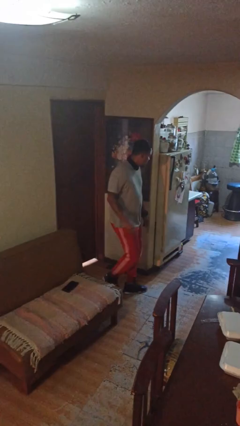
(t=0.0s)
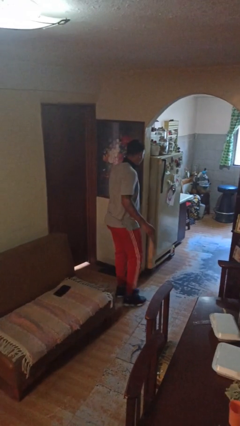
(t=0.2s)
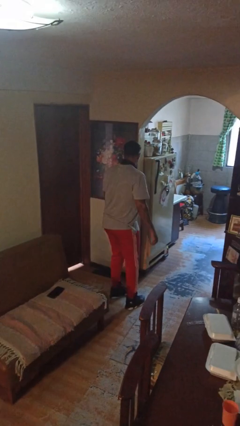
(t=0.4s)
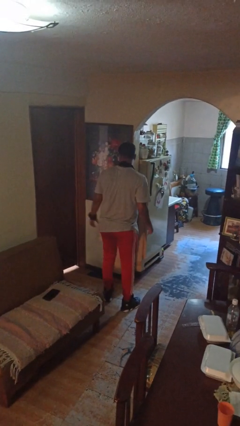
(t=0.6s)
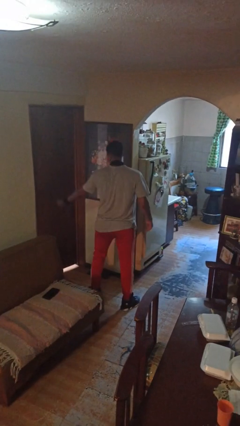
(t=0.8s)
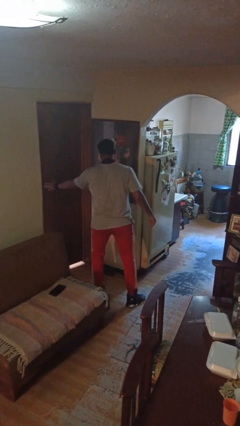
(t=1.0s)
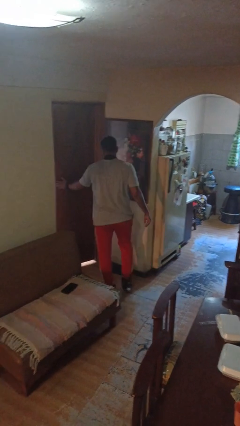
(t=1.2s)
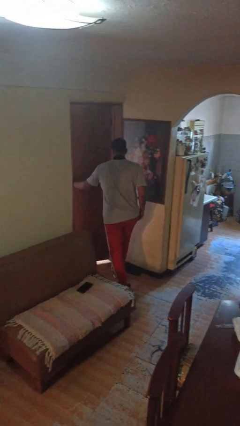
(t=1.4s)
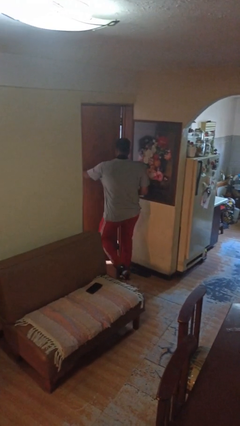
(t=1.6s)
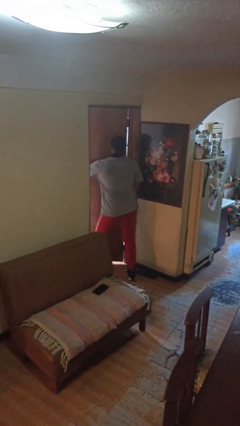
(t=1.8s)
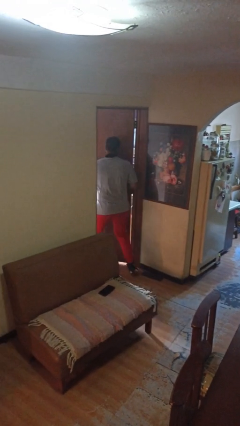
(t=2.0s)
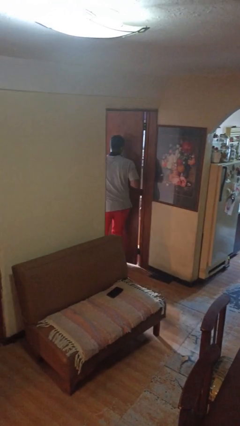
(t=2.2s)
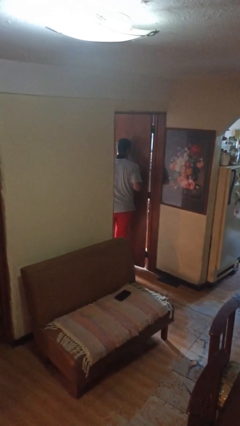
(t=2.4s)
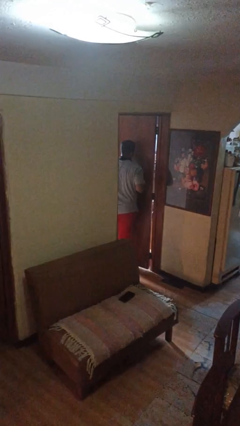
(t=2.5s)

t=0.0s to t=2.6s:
person opens facility door

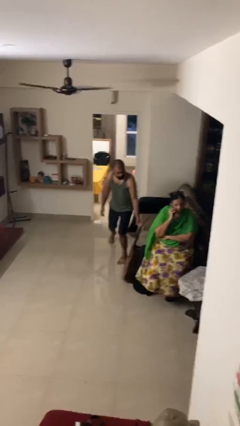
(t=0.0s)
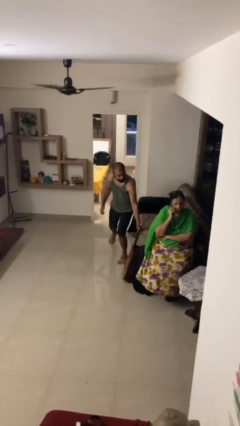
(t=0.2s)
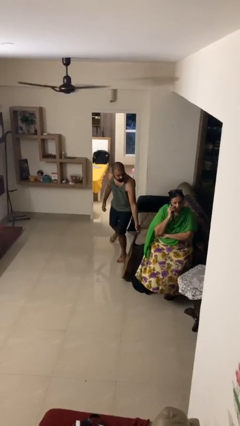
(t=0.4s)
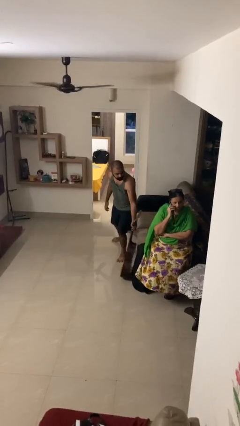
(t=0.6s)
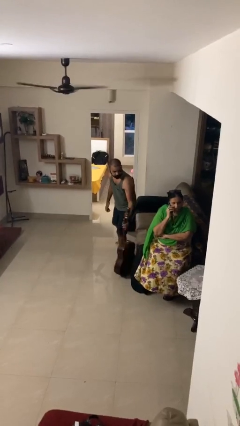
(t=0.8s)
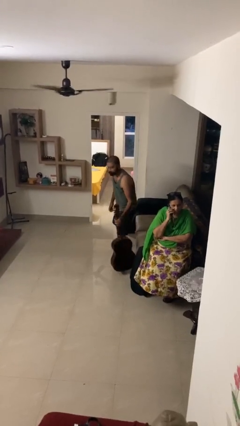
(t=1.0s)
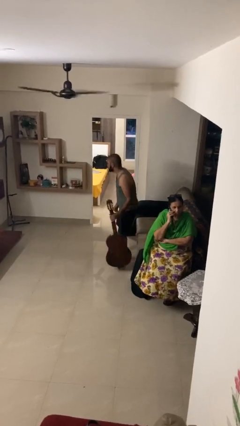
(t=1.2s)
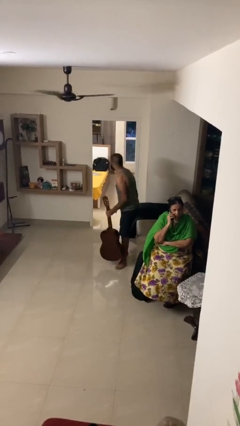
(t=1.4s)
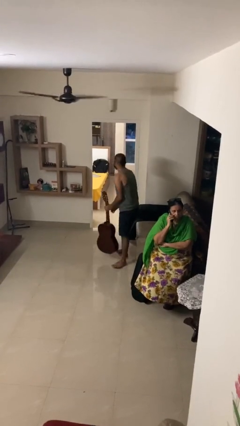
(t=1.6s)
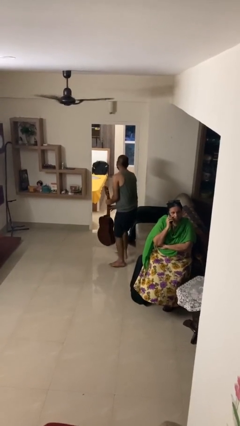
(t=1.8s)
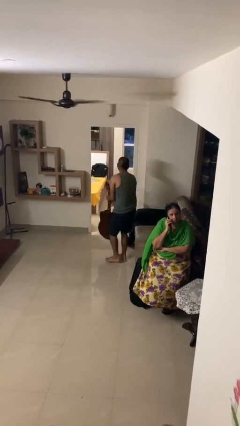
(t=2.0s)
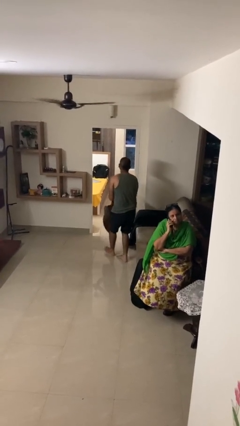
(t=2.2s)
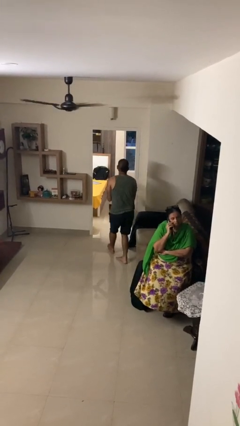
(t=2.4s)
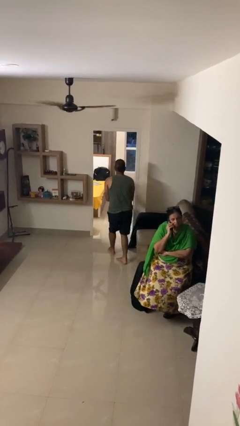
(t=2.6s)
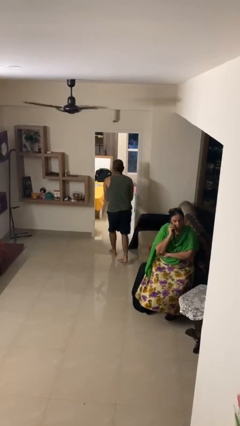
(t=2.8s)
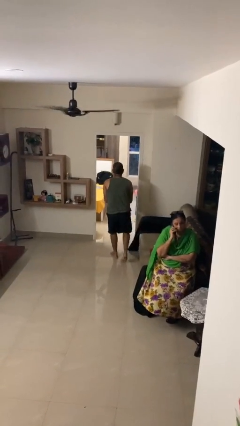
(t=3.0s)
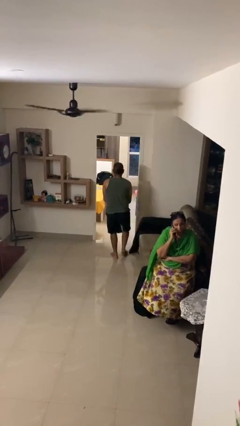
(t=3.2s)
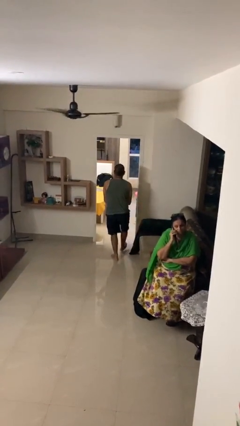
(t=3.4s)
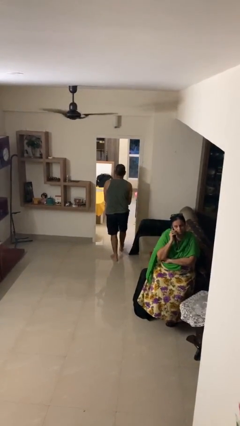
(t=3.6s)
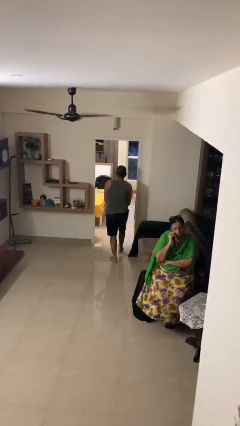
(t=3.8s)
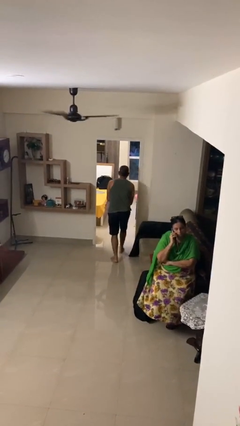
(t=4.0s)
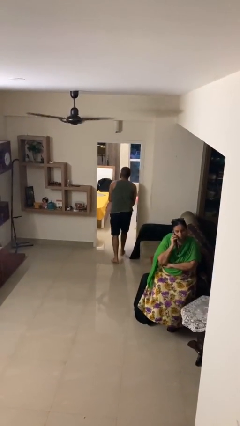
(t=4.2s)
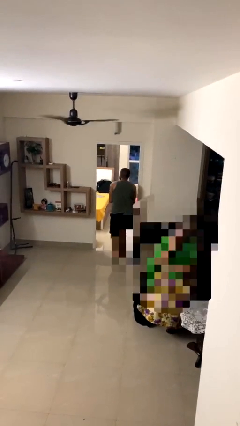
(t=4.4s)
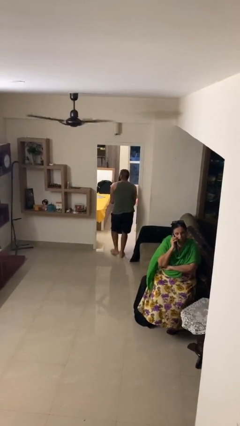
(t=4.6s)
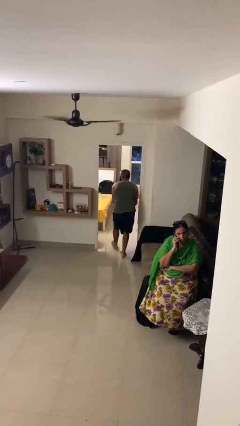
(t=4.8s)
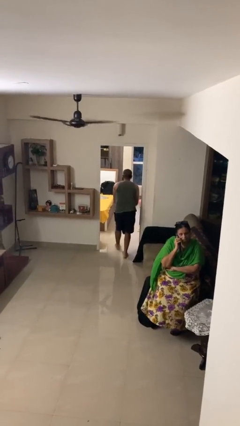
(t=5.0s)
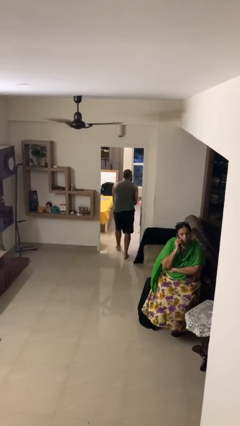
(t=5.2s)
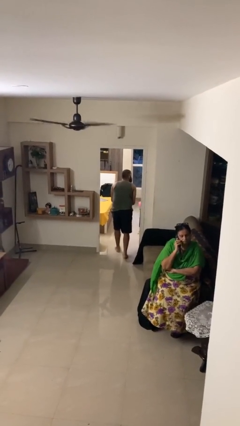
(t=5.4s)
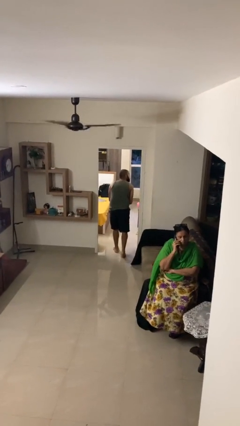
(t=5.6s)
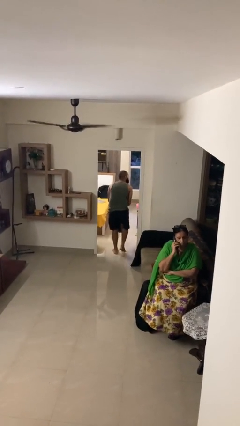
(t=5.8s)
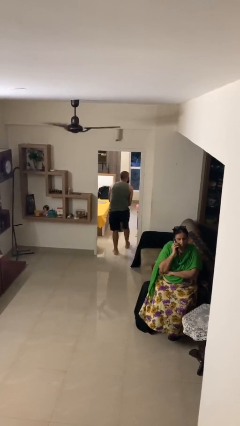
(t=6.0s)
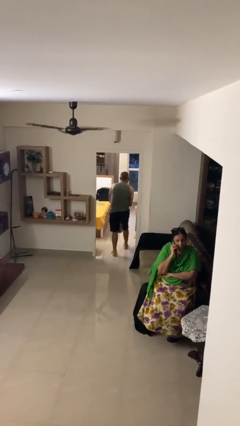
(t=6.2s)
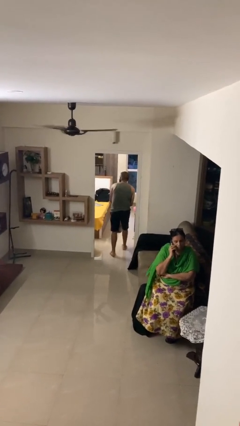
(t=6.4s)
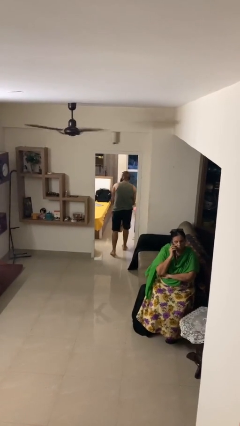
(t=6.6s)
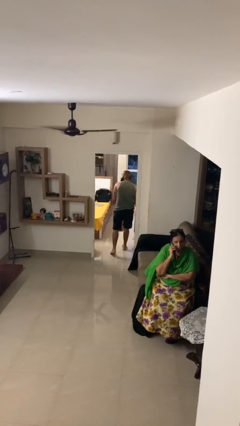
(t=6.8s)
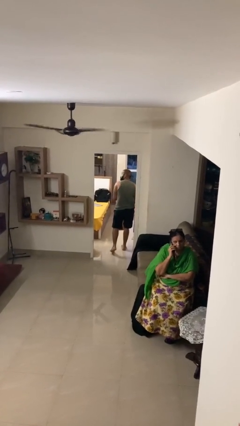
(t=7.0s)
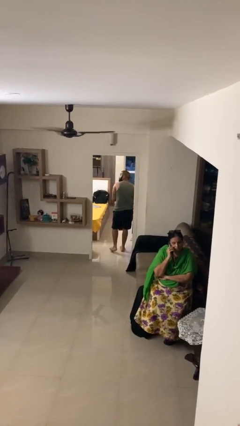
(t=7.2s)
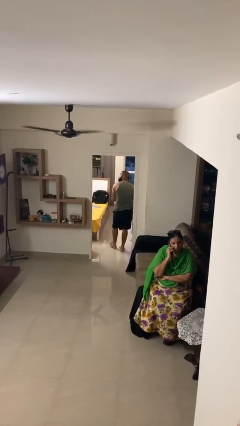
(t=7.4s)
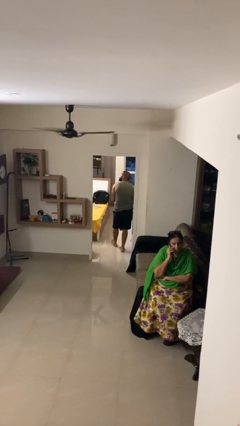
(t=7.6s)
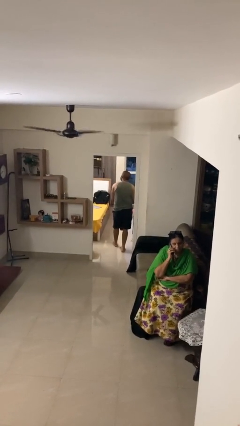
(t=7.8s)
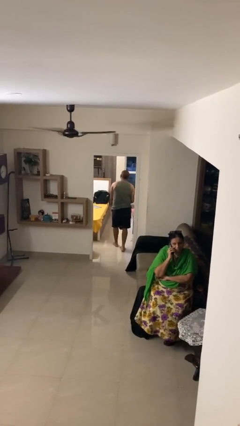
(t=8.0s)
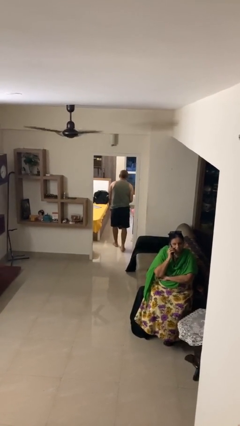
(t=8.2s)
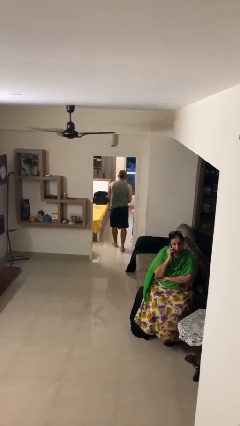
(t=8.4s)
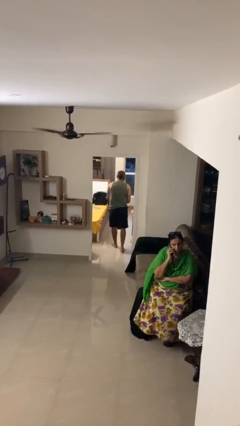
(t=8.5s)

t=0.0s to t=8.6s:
person steals object from person

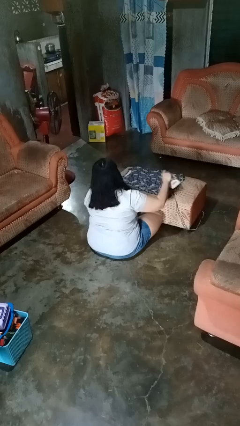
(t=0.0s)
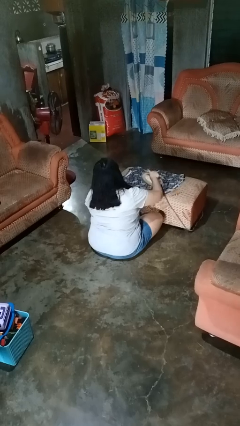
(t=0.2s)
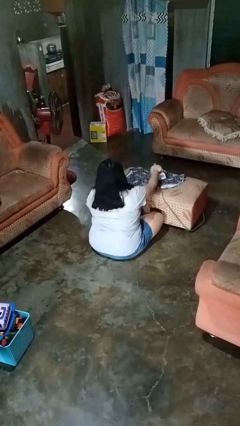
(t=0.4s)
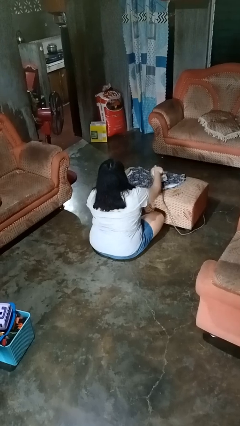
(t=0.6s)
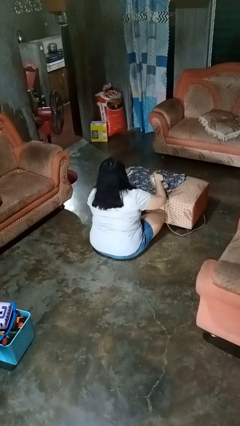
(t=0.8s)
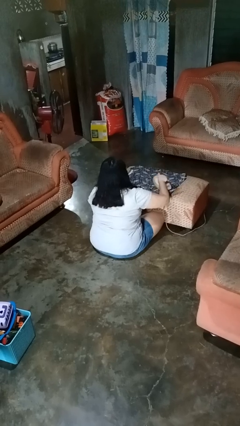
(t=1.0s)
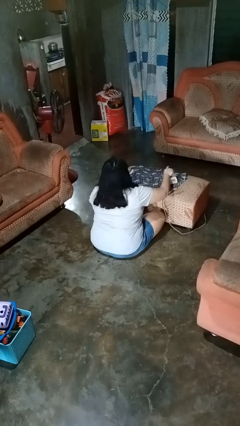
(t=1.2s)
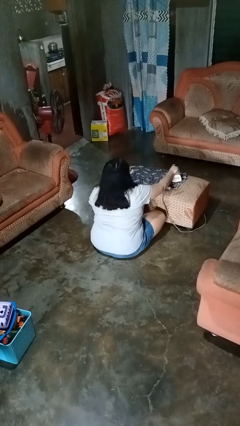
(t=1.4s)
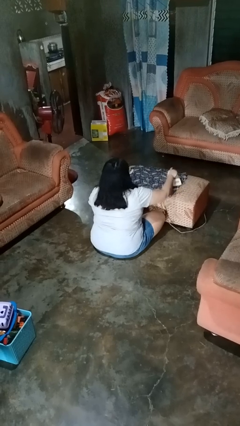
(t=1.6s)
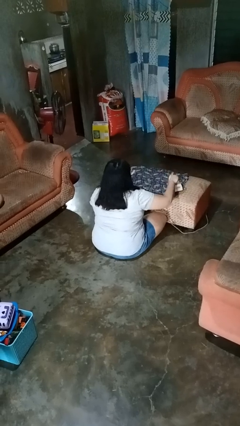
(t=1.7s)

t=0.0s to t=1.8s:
person irons clothes

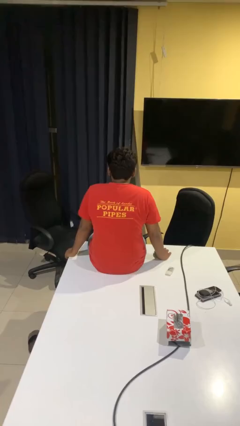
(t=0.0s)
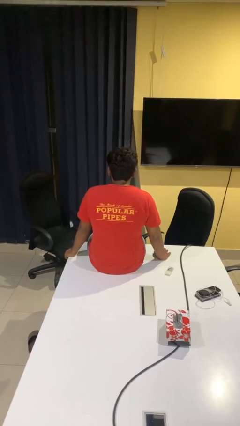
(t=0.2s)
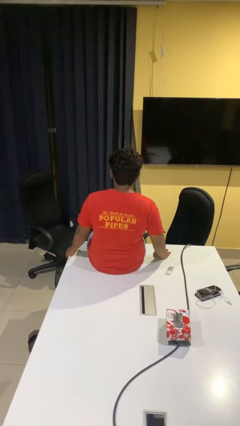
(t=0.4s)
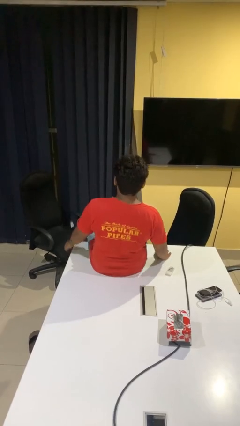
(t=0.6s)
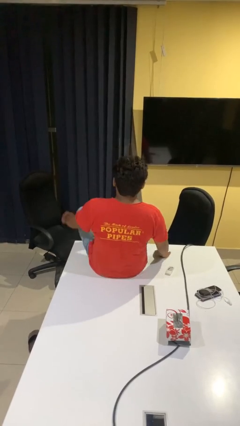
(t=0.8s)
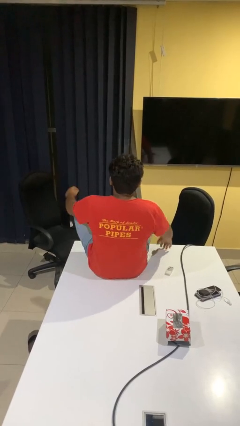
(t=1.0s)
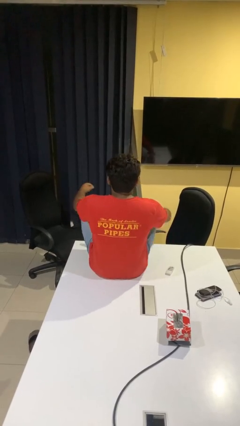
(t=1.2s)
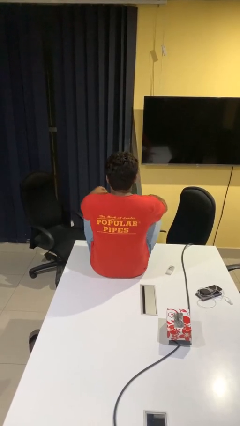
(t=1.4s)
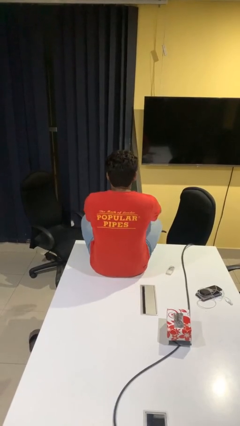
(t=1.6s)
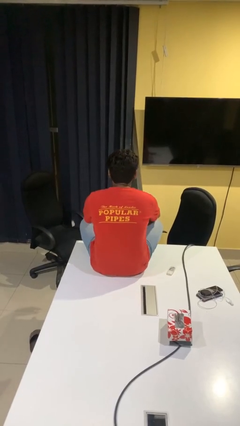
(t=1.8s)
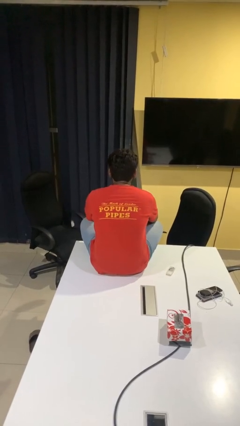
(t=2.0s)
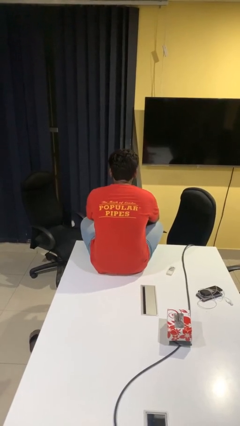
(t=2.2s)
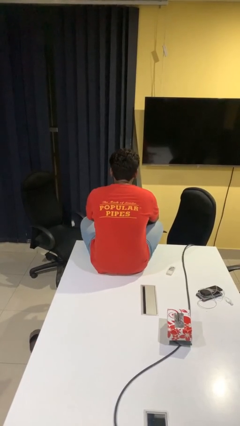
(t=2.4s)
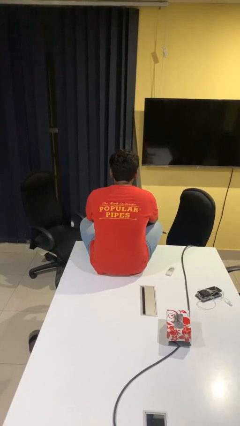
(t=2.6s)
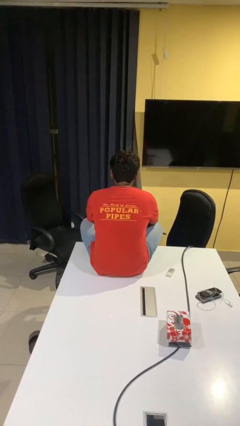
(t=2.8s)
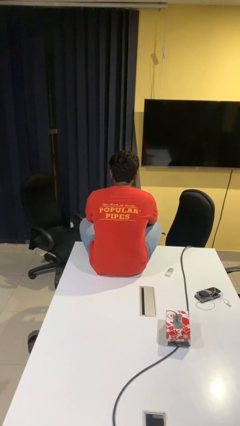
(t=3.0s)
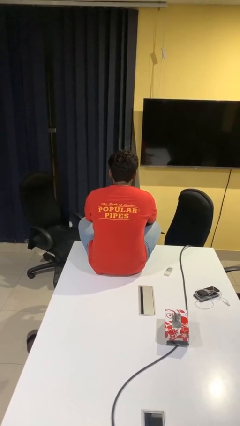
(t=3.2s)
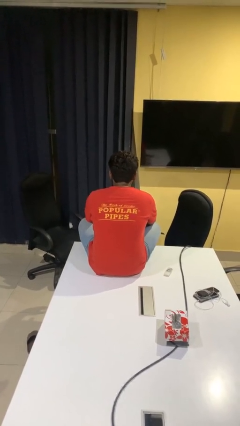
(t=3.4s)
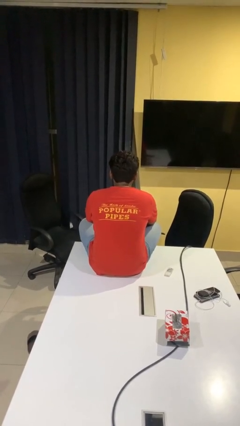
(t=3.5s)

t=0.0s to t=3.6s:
person puts feet up

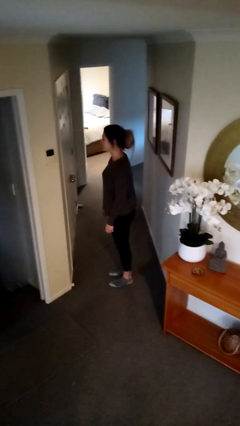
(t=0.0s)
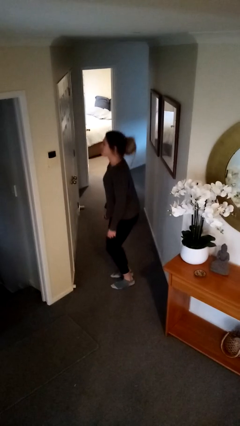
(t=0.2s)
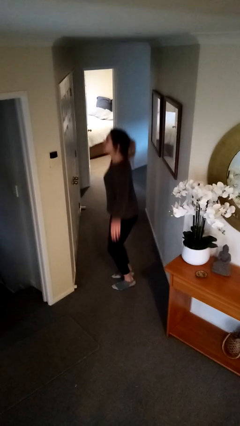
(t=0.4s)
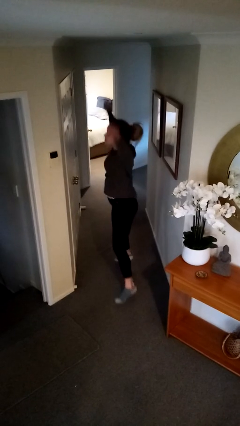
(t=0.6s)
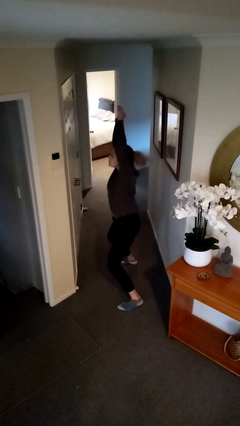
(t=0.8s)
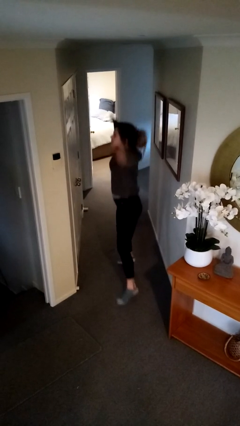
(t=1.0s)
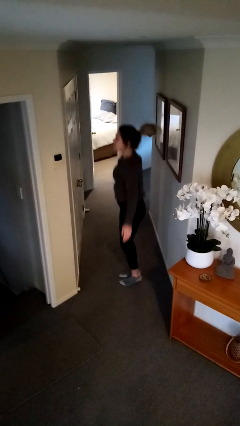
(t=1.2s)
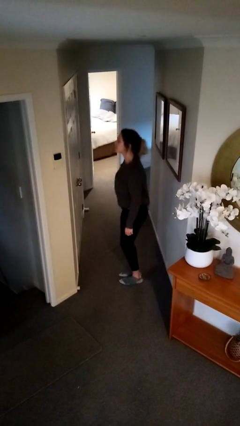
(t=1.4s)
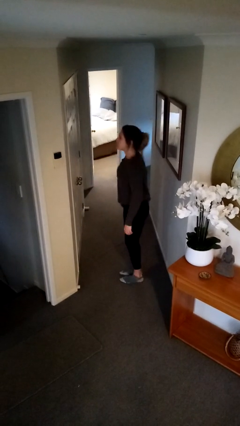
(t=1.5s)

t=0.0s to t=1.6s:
person exercises with jumping jacks
